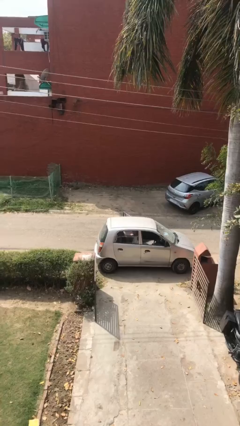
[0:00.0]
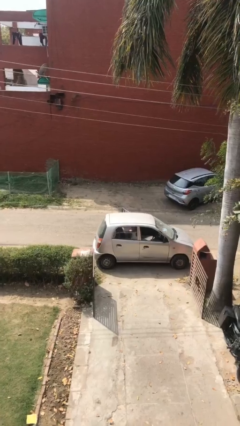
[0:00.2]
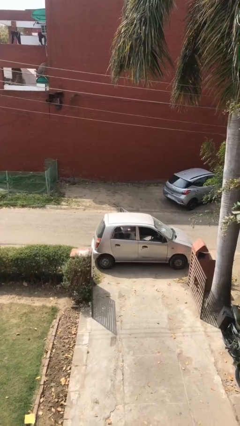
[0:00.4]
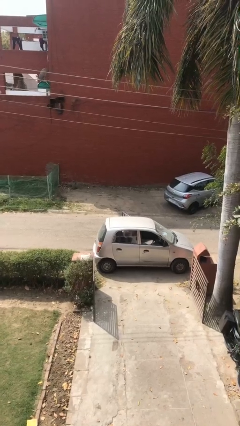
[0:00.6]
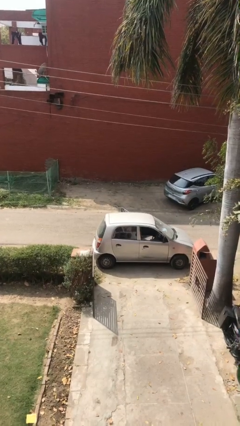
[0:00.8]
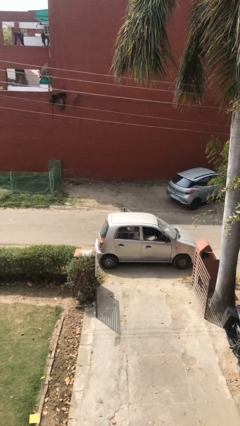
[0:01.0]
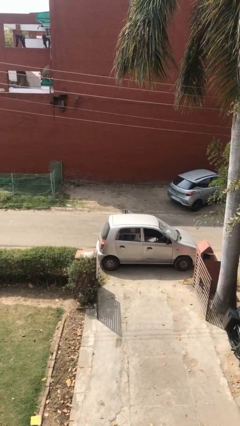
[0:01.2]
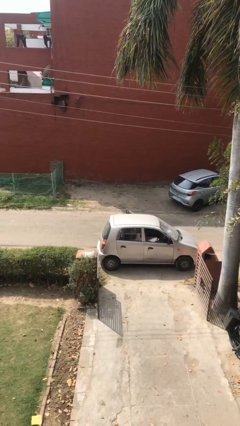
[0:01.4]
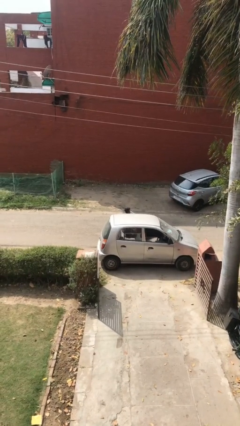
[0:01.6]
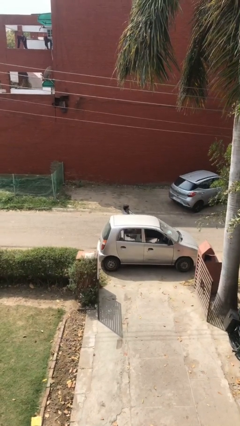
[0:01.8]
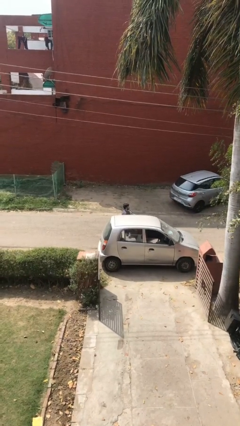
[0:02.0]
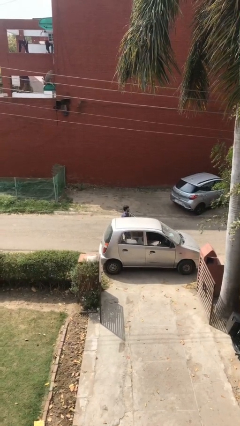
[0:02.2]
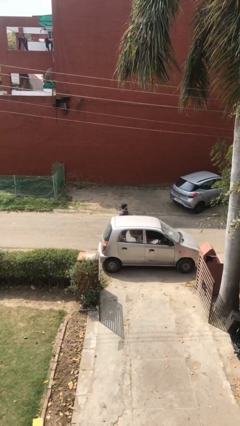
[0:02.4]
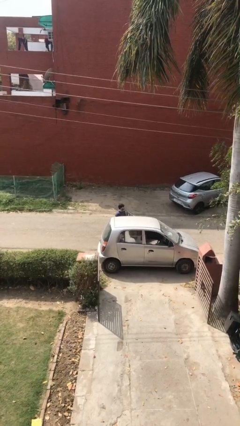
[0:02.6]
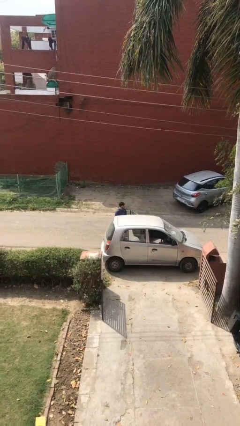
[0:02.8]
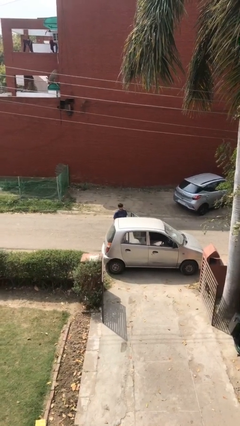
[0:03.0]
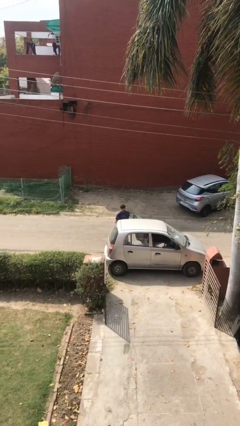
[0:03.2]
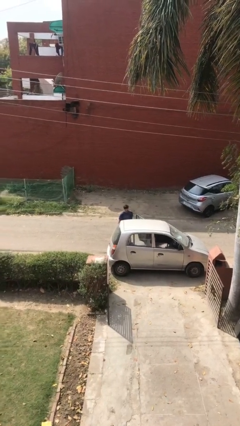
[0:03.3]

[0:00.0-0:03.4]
person exits car

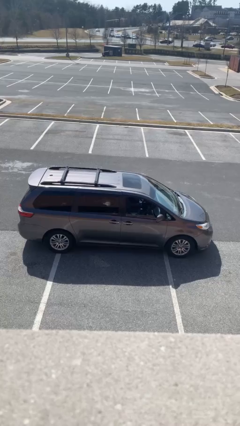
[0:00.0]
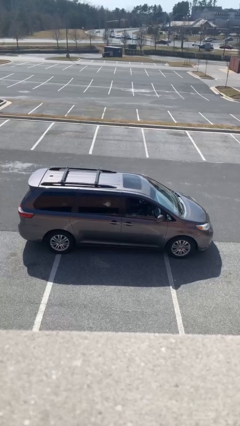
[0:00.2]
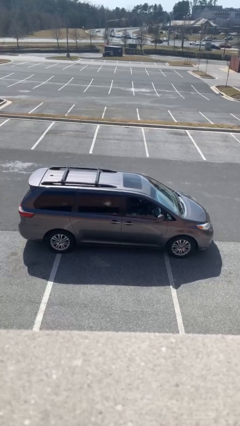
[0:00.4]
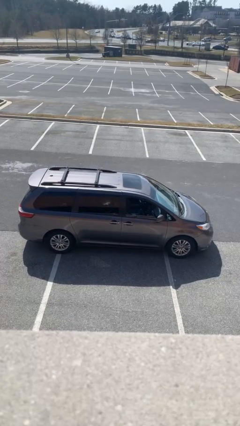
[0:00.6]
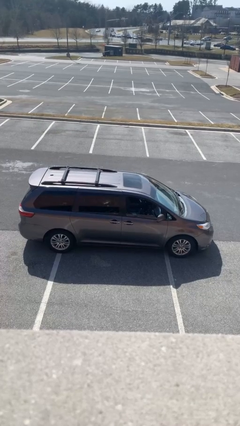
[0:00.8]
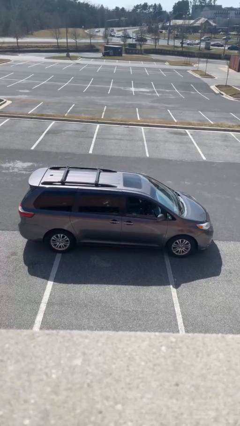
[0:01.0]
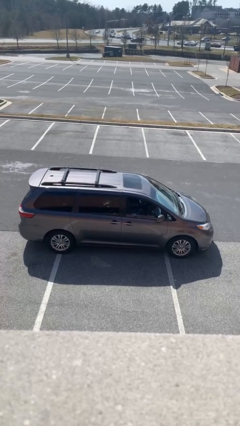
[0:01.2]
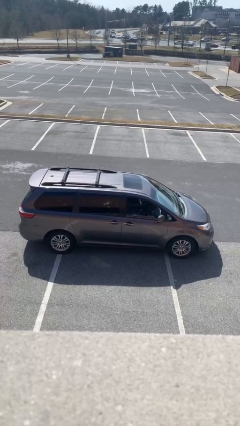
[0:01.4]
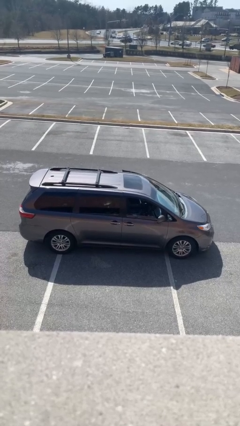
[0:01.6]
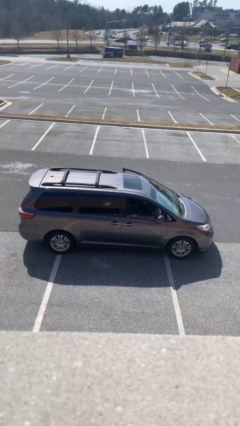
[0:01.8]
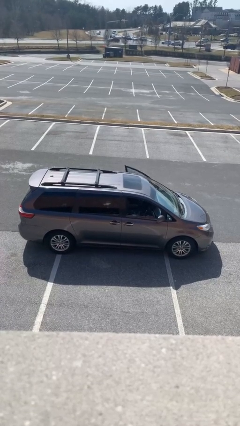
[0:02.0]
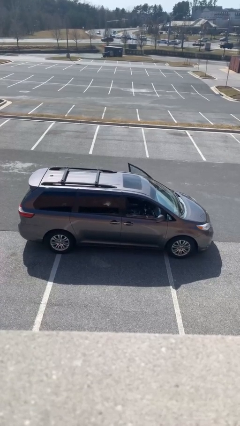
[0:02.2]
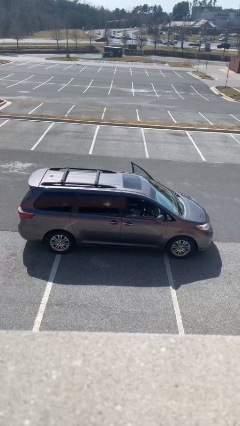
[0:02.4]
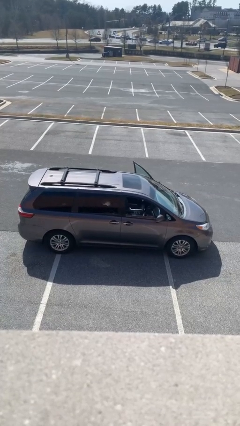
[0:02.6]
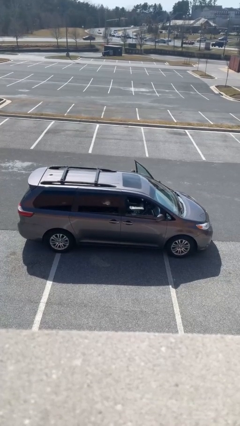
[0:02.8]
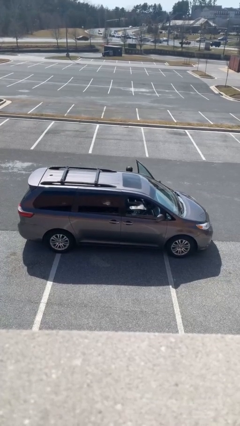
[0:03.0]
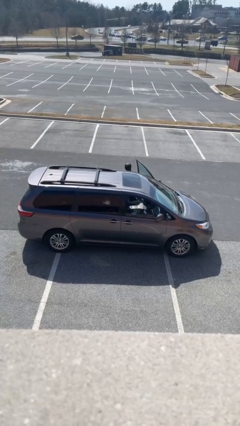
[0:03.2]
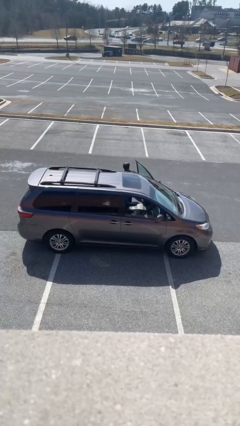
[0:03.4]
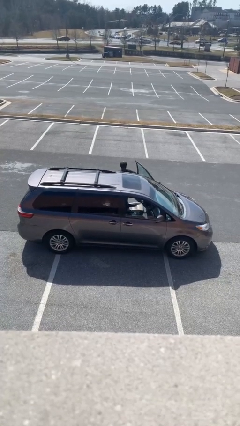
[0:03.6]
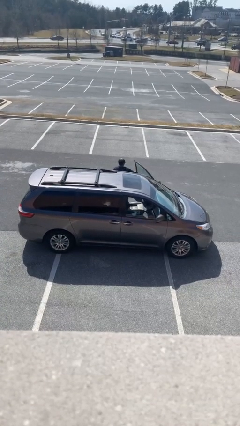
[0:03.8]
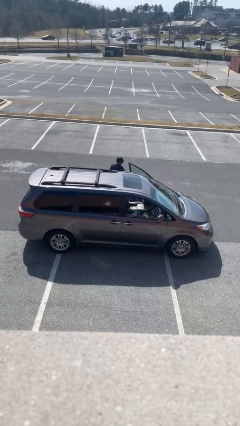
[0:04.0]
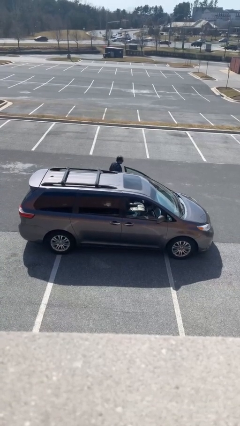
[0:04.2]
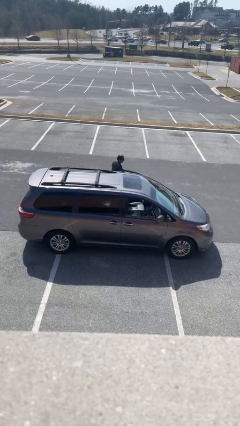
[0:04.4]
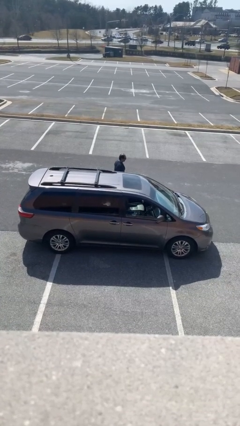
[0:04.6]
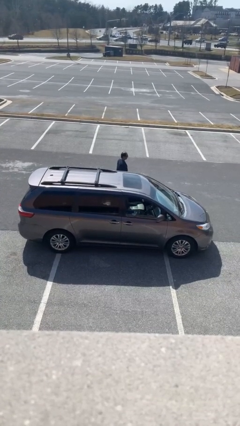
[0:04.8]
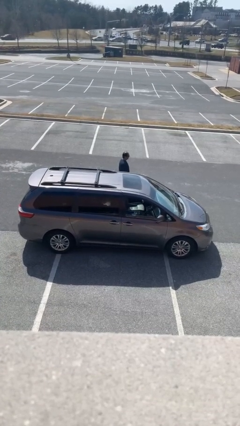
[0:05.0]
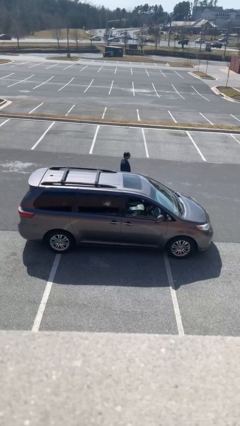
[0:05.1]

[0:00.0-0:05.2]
car drops off person

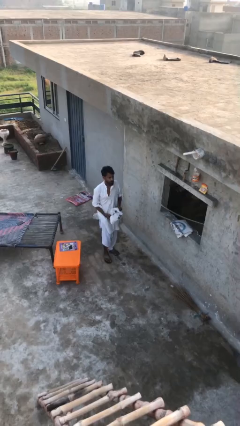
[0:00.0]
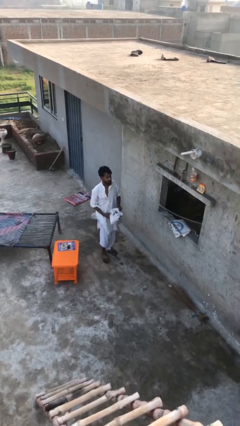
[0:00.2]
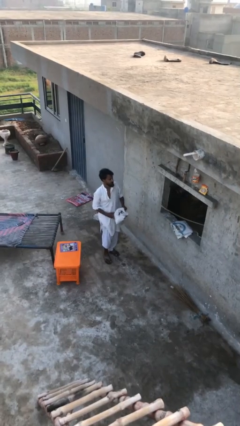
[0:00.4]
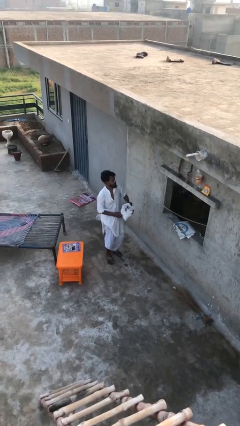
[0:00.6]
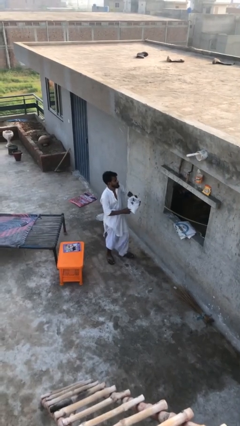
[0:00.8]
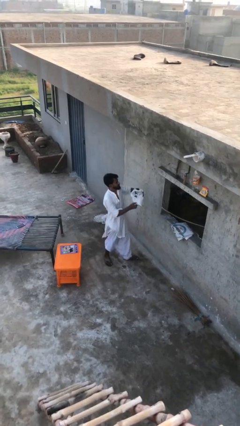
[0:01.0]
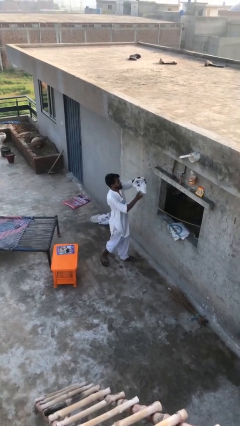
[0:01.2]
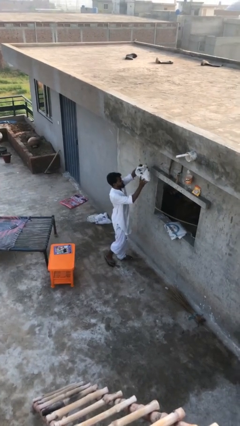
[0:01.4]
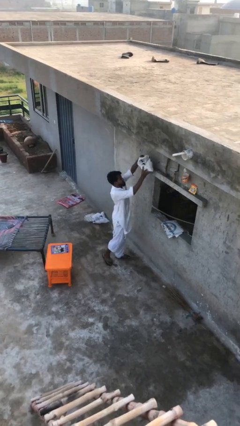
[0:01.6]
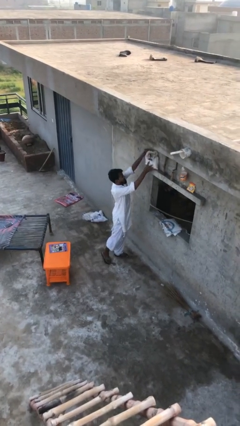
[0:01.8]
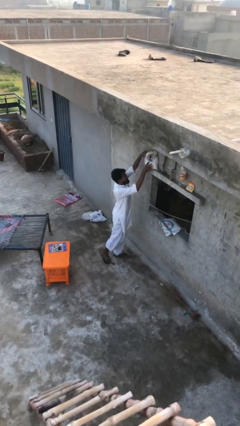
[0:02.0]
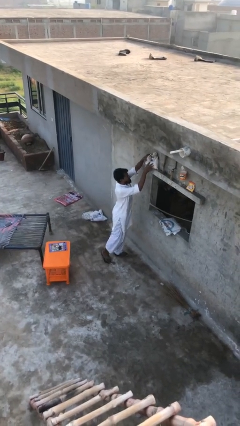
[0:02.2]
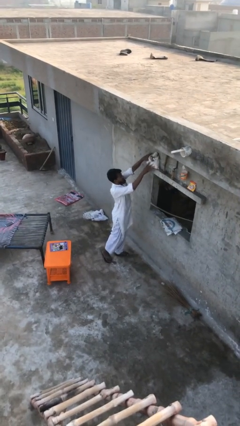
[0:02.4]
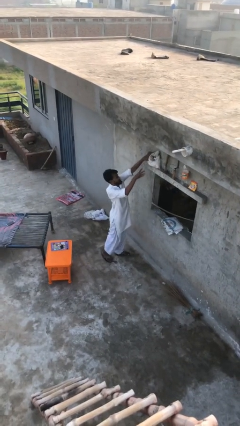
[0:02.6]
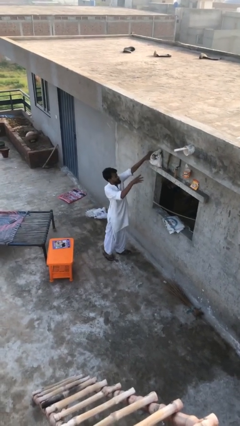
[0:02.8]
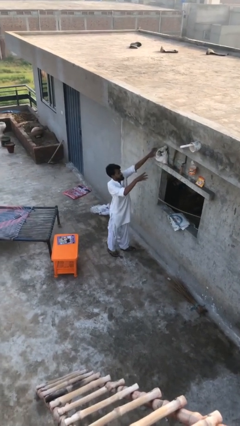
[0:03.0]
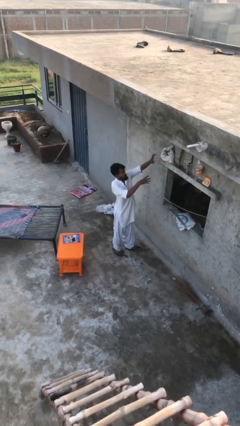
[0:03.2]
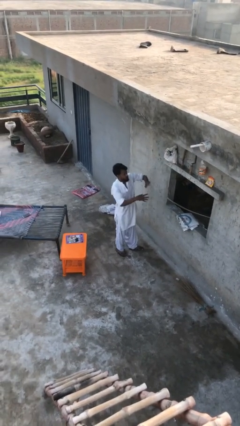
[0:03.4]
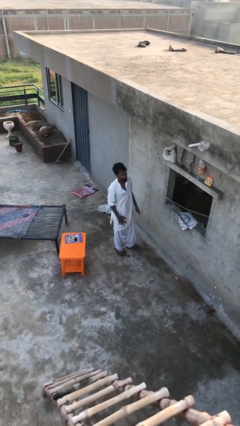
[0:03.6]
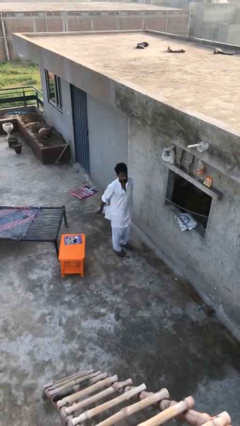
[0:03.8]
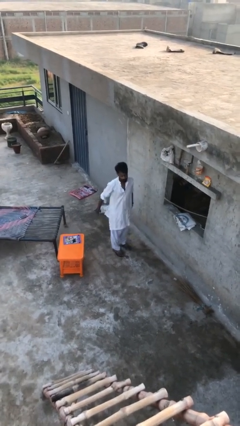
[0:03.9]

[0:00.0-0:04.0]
person puts down object on shelf

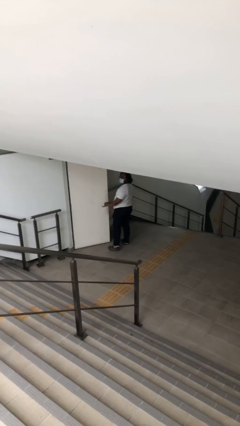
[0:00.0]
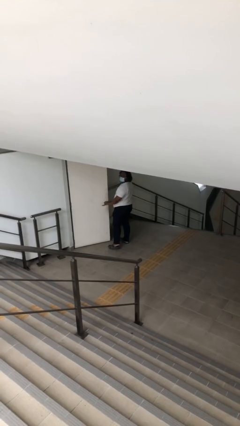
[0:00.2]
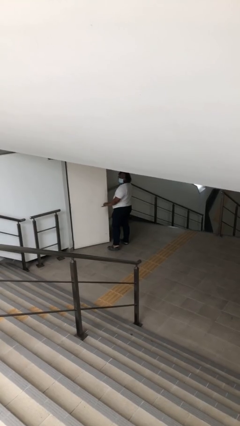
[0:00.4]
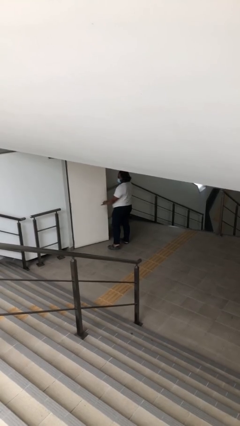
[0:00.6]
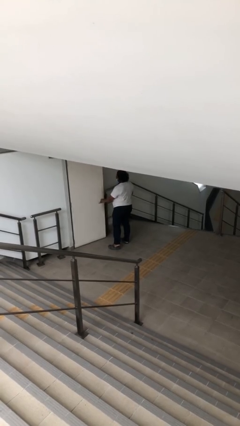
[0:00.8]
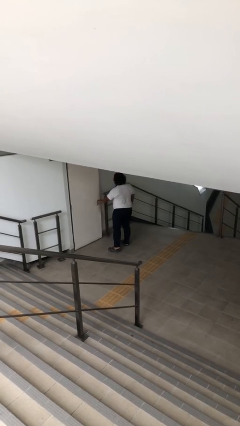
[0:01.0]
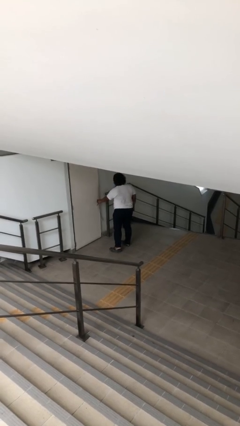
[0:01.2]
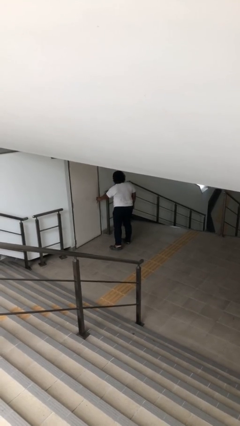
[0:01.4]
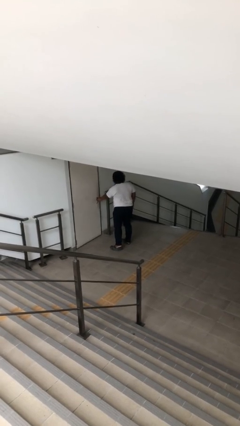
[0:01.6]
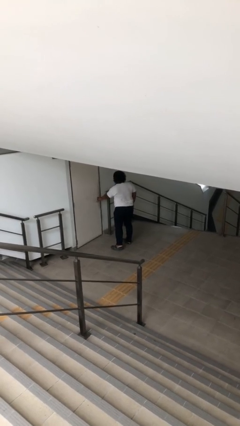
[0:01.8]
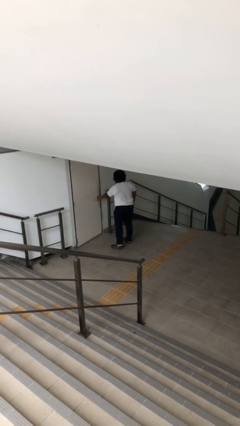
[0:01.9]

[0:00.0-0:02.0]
person closes facility door

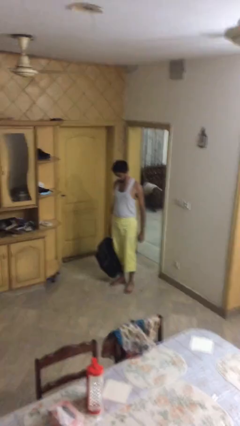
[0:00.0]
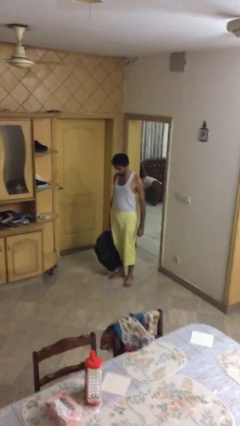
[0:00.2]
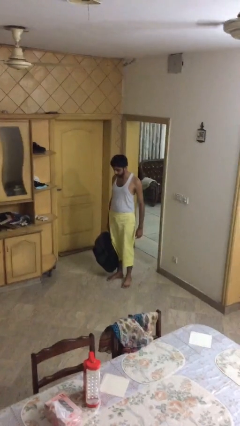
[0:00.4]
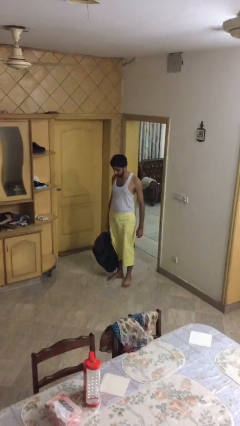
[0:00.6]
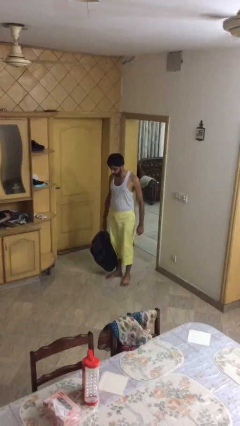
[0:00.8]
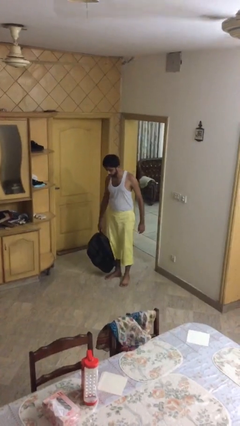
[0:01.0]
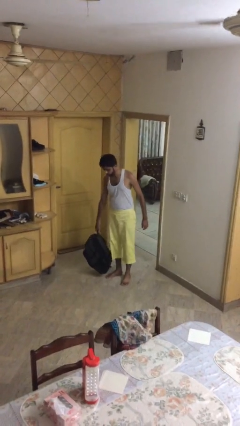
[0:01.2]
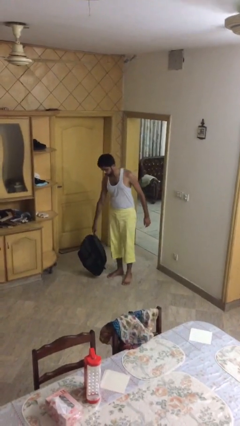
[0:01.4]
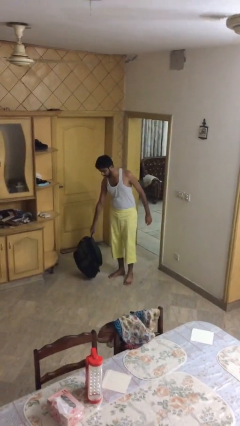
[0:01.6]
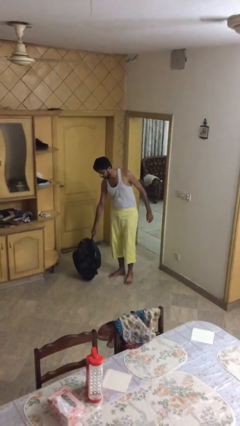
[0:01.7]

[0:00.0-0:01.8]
person puts down object on floor

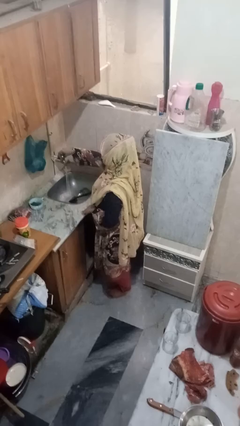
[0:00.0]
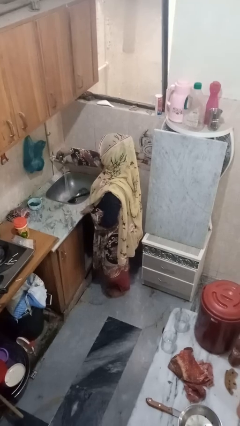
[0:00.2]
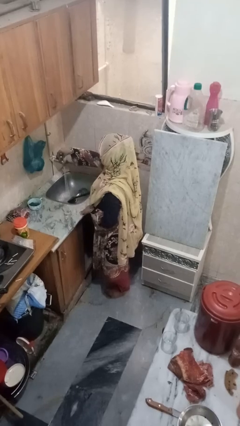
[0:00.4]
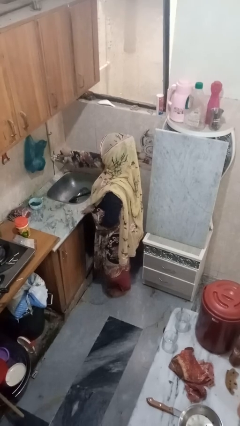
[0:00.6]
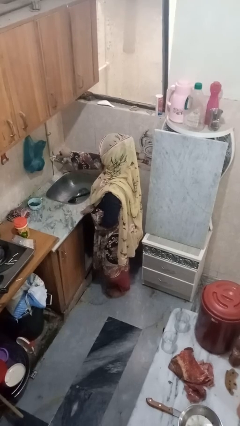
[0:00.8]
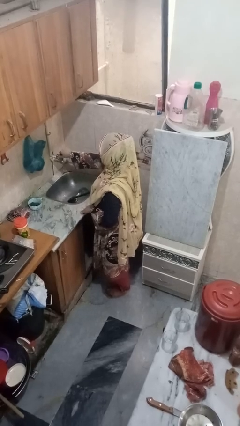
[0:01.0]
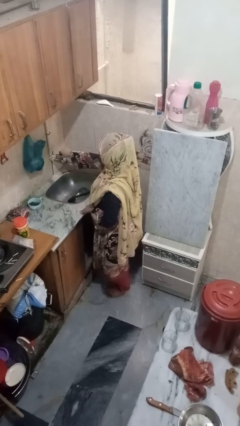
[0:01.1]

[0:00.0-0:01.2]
person turns off faucet

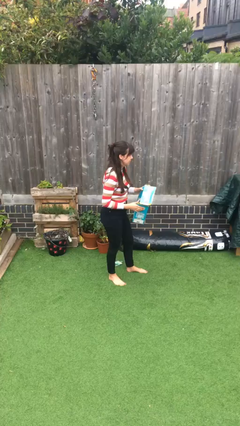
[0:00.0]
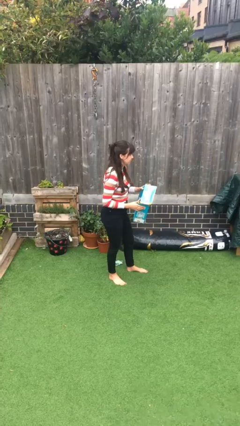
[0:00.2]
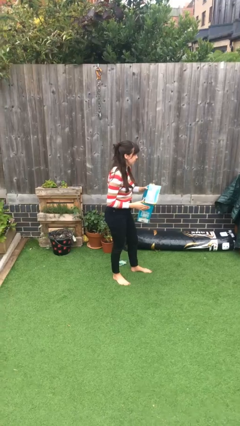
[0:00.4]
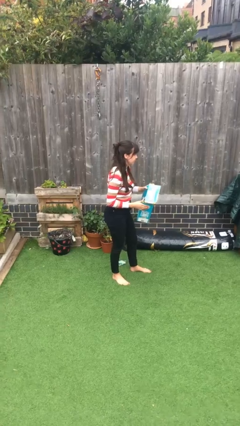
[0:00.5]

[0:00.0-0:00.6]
person puts down object on table
